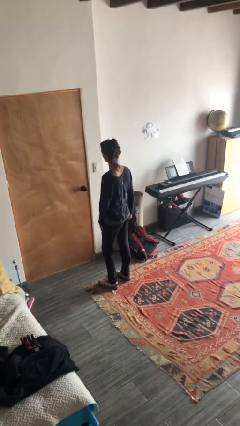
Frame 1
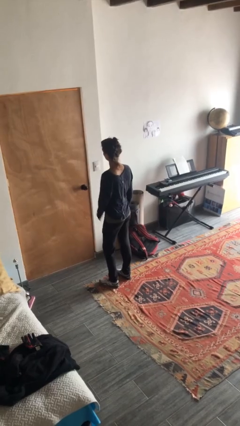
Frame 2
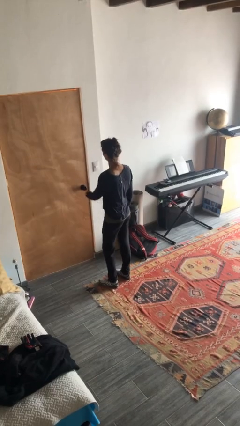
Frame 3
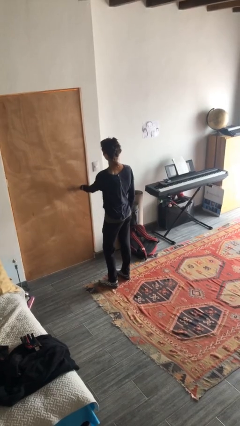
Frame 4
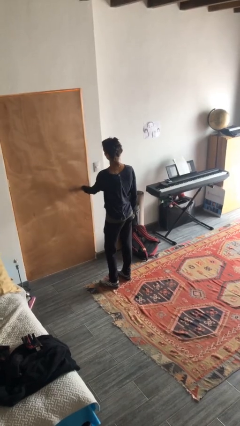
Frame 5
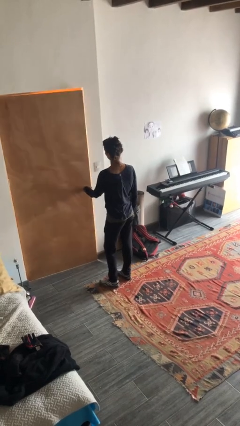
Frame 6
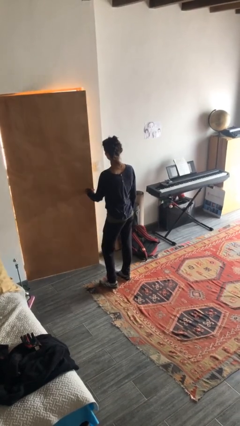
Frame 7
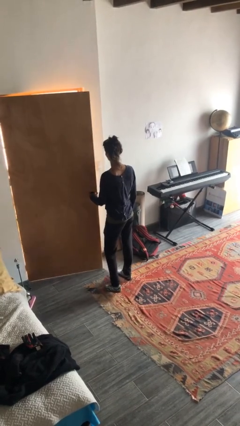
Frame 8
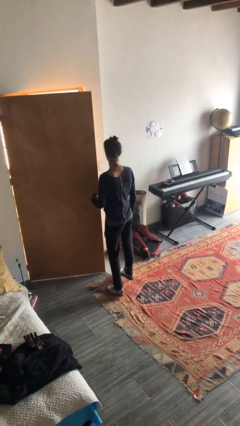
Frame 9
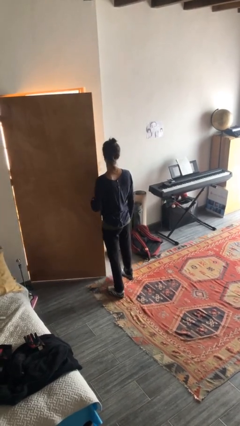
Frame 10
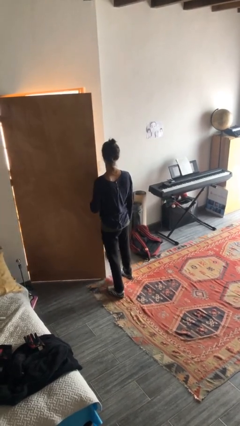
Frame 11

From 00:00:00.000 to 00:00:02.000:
person opens facility door

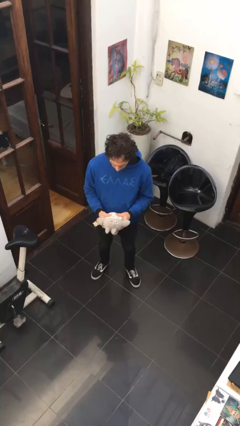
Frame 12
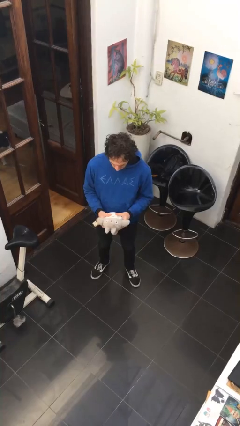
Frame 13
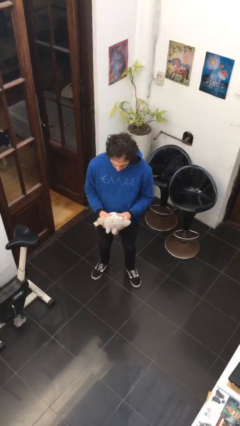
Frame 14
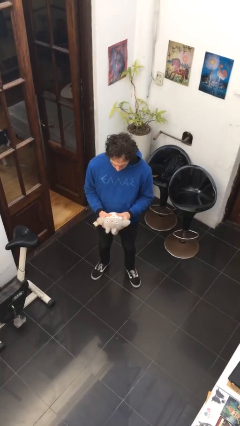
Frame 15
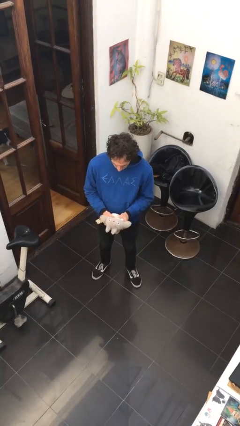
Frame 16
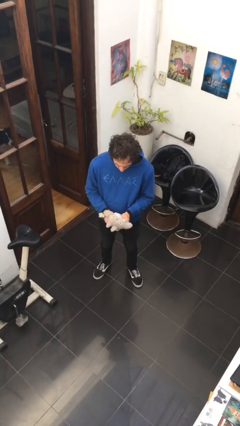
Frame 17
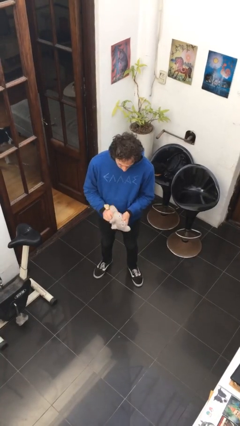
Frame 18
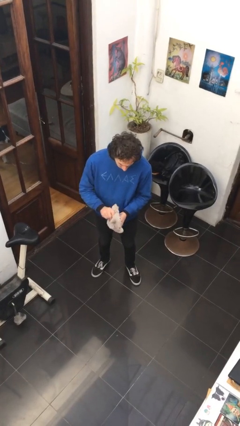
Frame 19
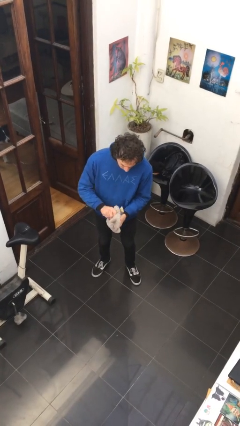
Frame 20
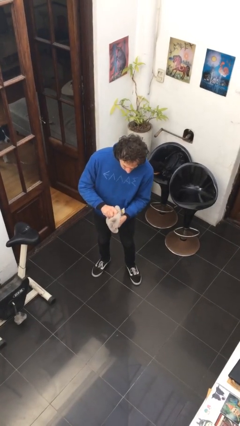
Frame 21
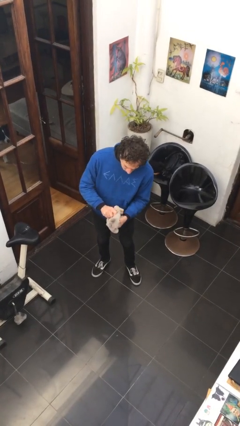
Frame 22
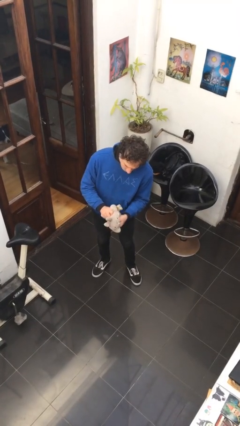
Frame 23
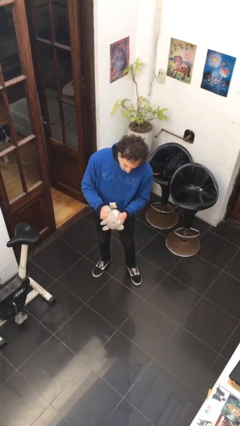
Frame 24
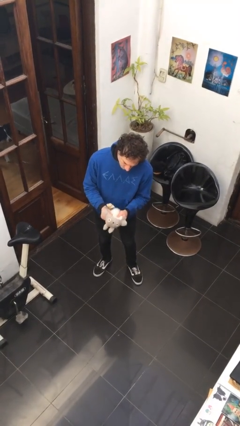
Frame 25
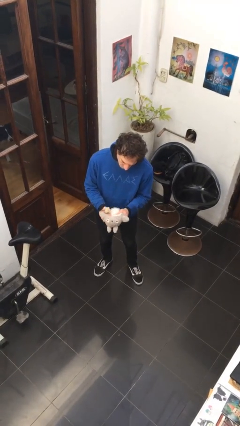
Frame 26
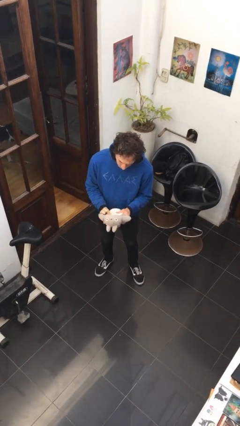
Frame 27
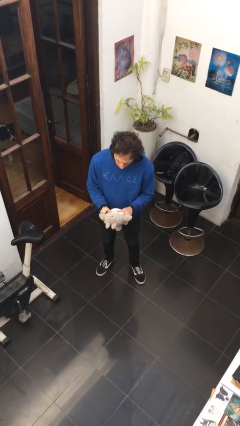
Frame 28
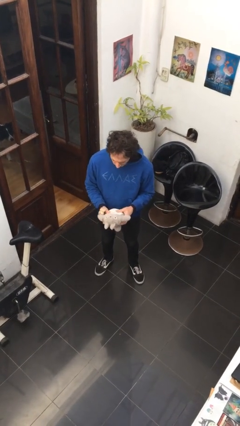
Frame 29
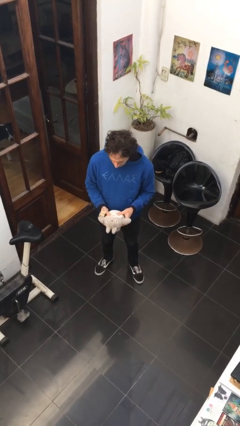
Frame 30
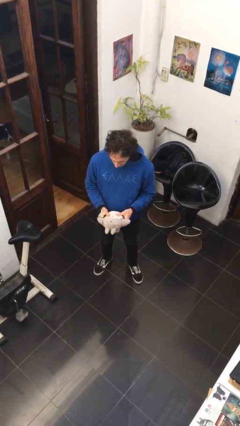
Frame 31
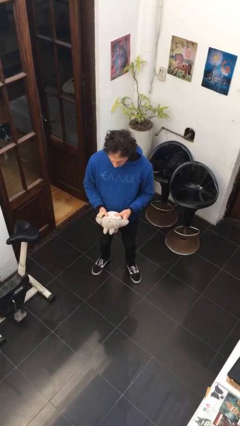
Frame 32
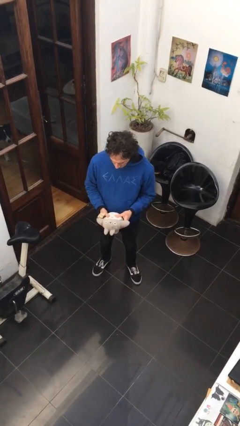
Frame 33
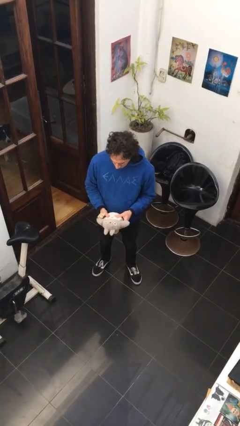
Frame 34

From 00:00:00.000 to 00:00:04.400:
person squeezes object

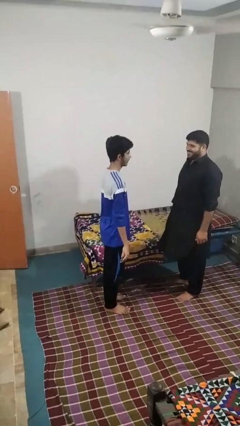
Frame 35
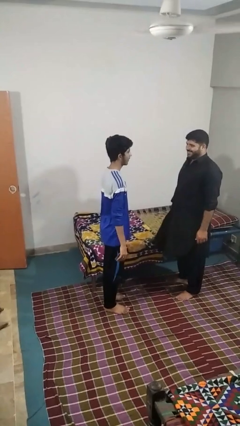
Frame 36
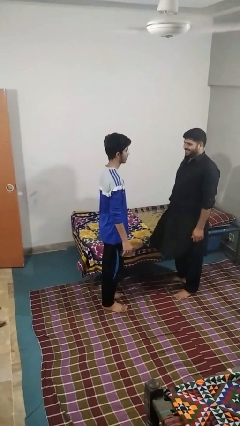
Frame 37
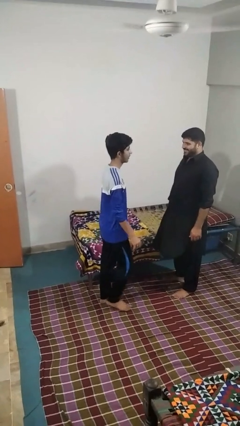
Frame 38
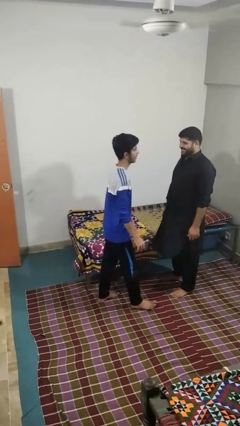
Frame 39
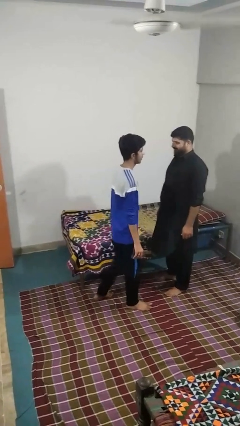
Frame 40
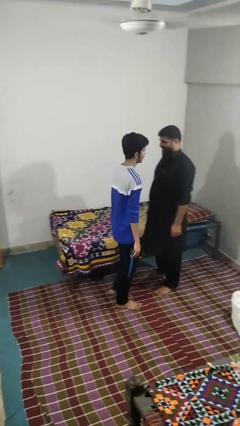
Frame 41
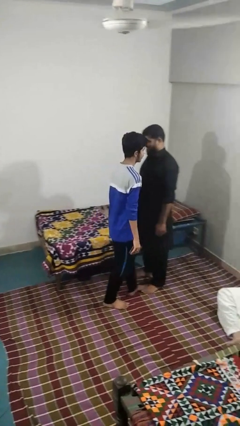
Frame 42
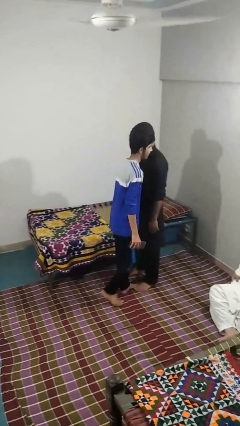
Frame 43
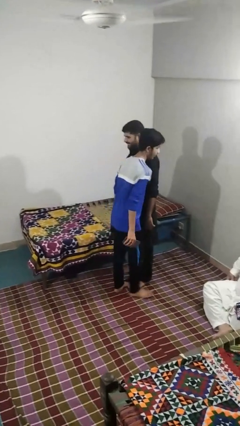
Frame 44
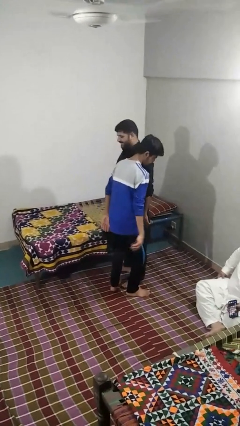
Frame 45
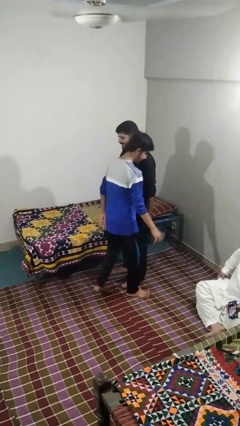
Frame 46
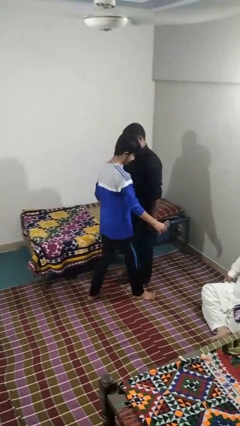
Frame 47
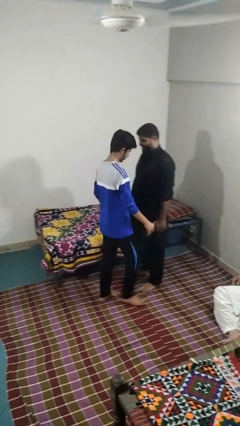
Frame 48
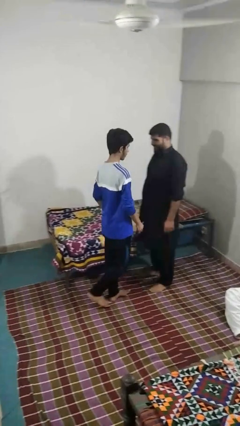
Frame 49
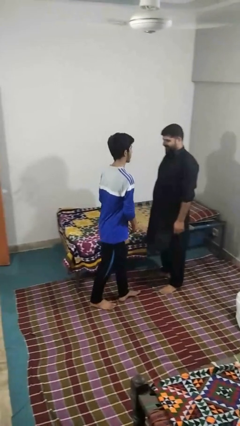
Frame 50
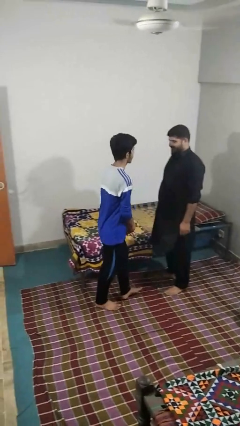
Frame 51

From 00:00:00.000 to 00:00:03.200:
person bumps into person

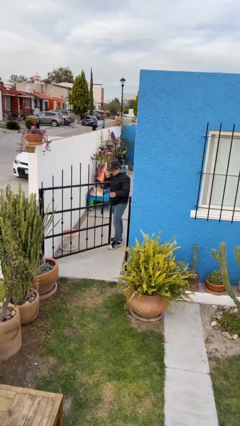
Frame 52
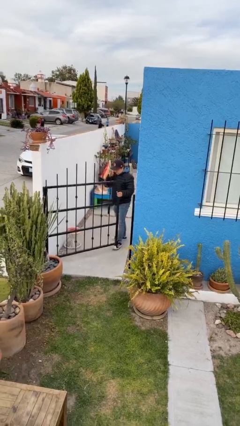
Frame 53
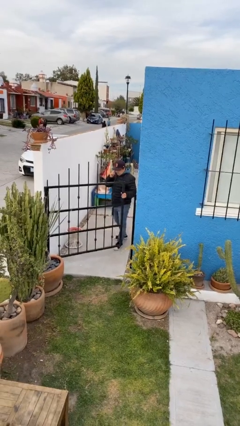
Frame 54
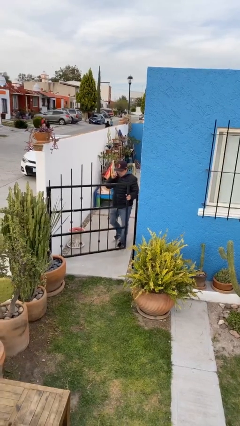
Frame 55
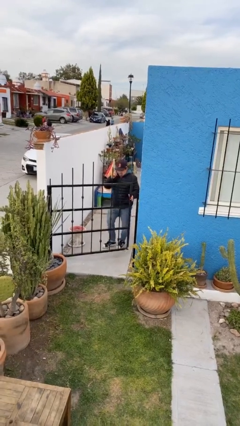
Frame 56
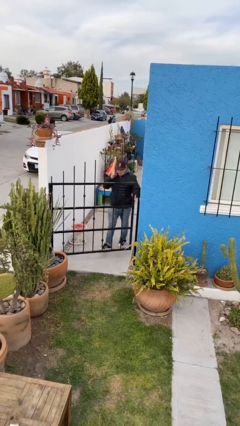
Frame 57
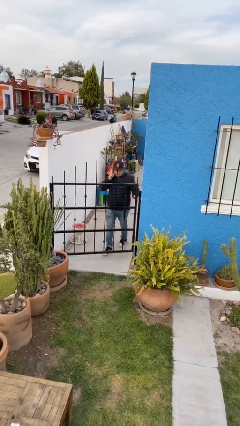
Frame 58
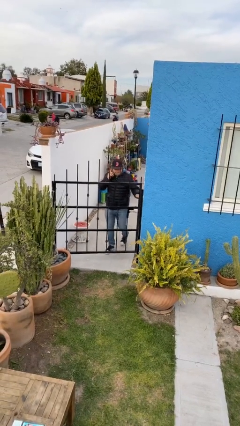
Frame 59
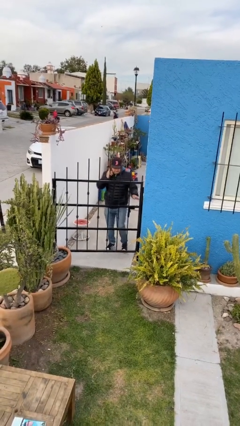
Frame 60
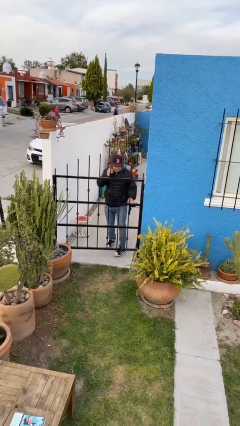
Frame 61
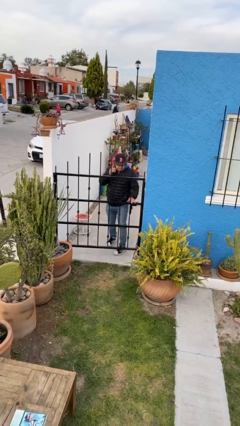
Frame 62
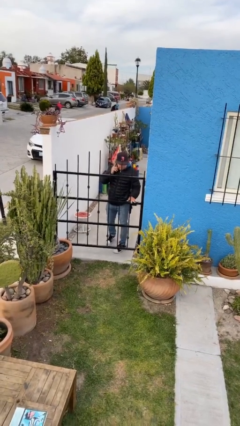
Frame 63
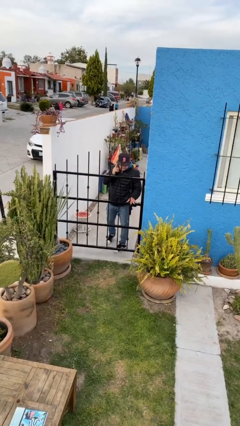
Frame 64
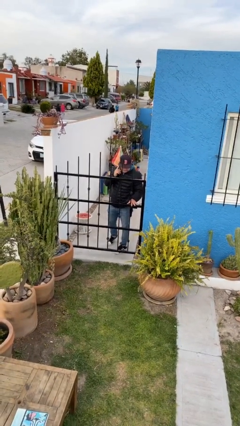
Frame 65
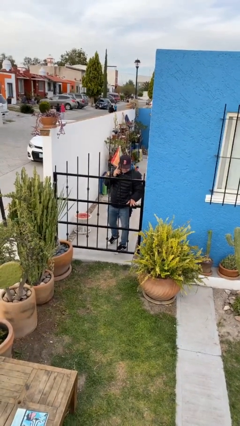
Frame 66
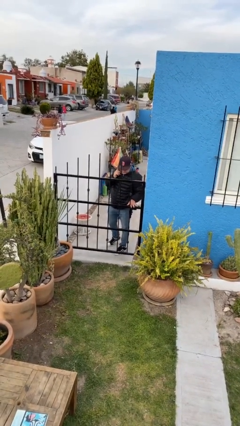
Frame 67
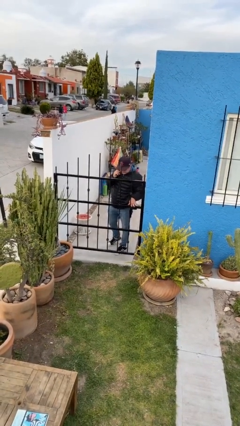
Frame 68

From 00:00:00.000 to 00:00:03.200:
person closes facility door

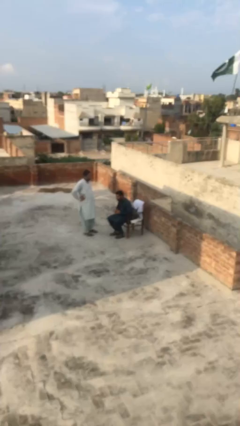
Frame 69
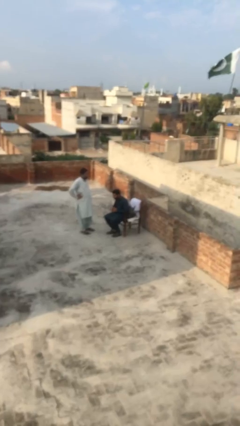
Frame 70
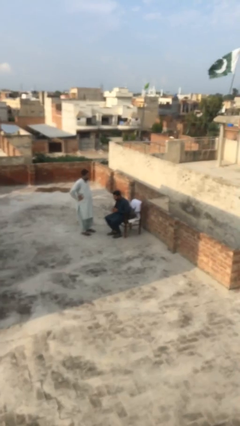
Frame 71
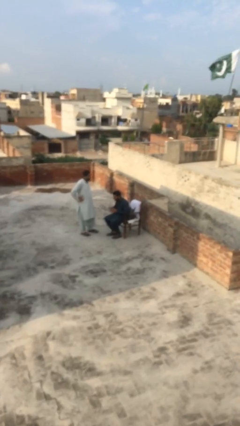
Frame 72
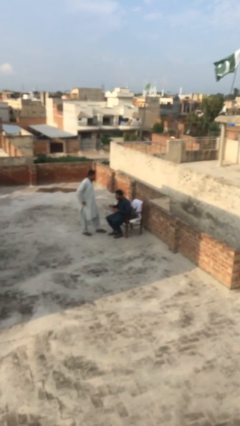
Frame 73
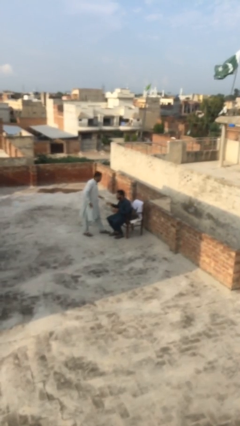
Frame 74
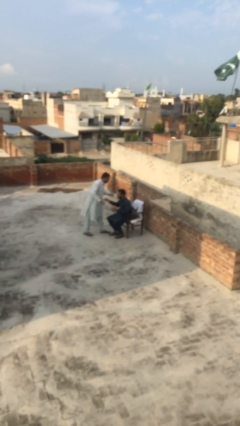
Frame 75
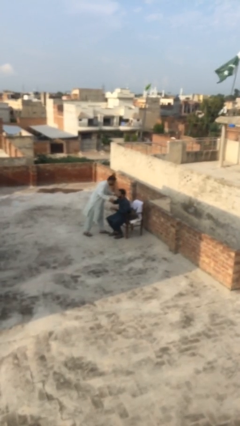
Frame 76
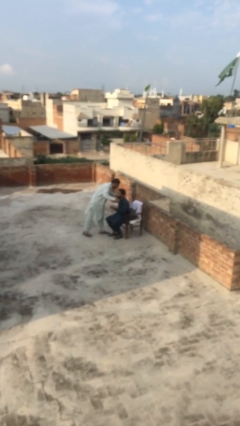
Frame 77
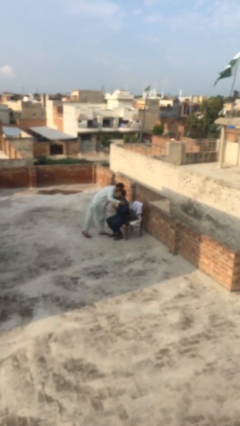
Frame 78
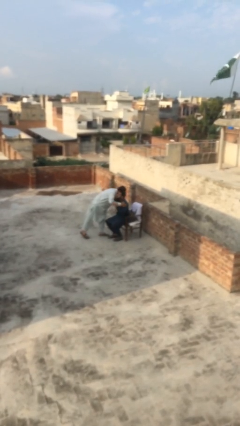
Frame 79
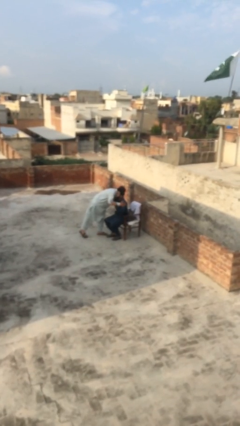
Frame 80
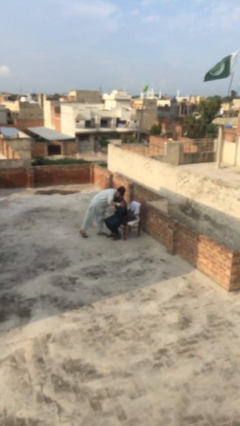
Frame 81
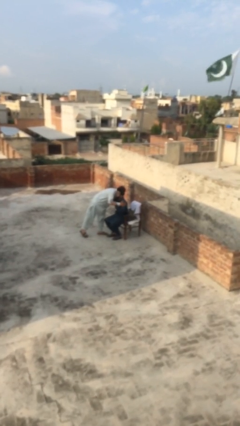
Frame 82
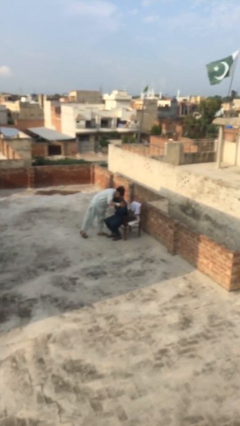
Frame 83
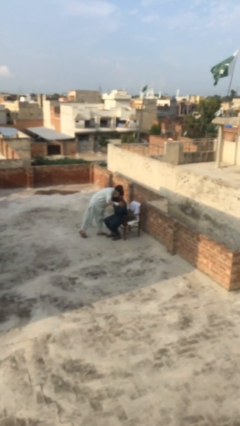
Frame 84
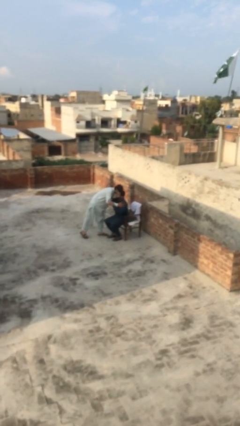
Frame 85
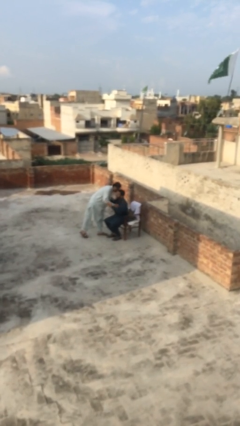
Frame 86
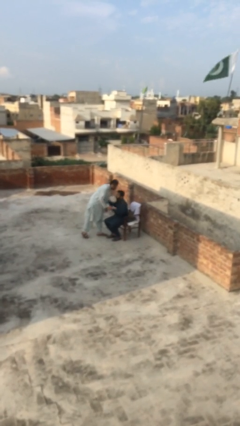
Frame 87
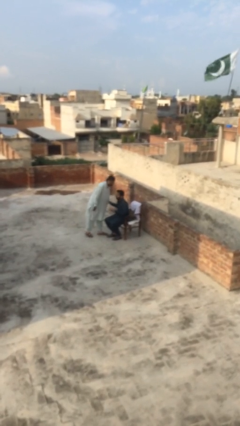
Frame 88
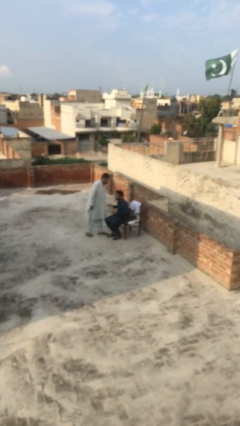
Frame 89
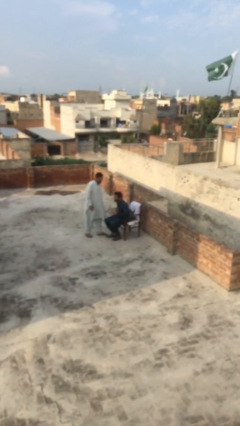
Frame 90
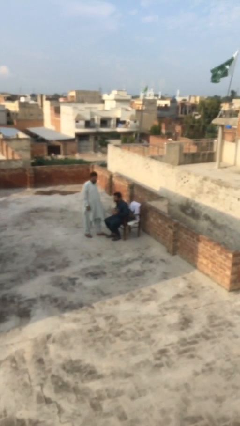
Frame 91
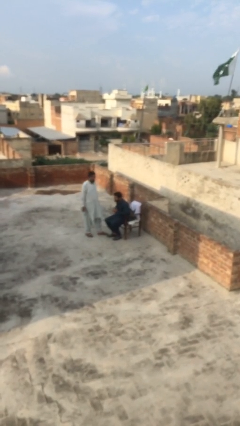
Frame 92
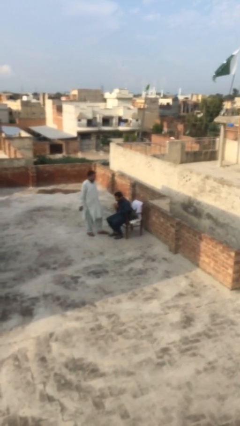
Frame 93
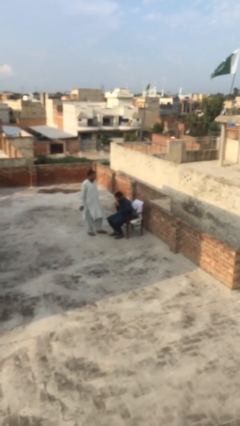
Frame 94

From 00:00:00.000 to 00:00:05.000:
person embraces person
